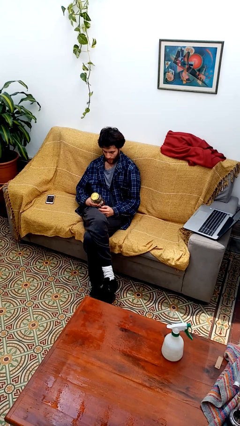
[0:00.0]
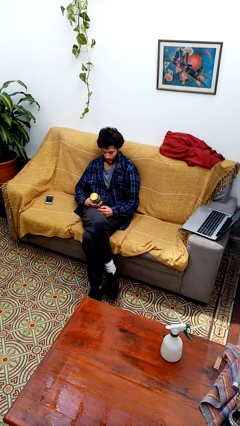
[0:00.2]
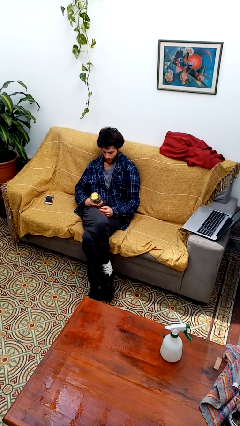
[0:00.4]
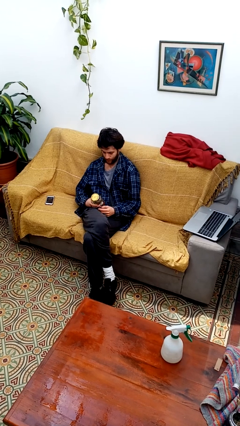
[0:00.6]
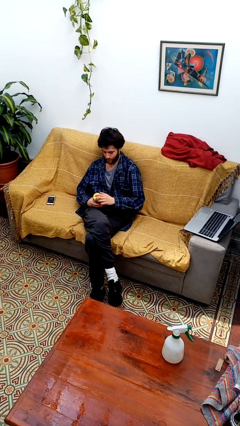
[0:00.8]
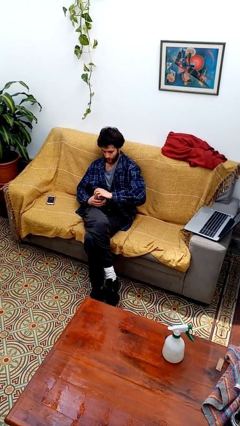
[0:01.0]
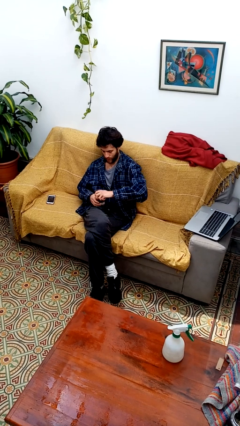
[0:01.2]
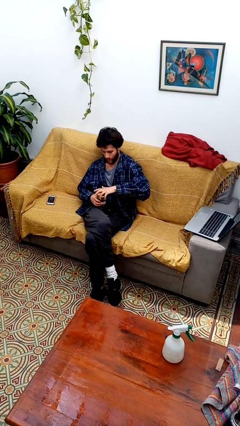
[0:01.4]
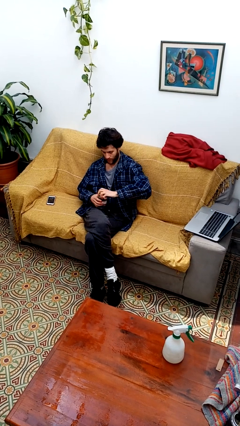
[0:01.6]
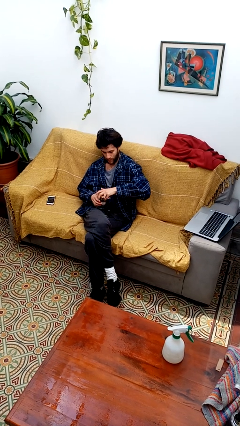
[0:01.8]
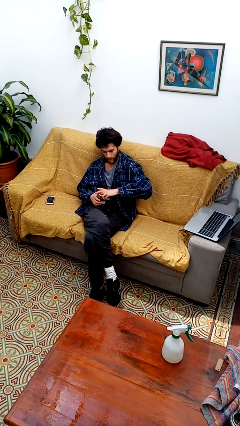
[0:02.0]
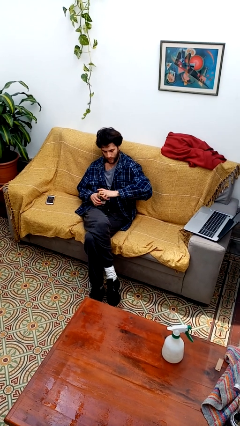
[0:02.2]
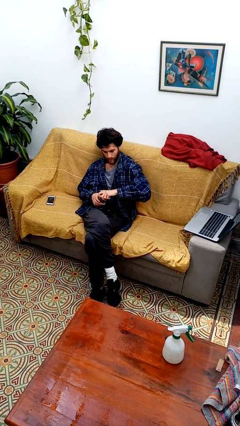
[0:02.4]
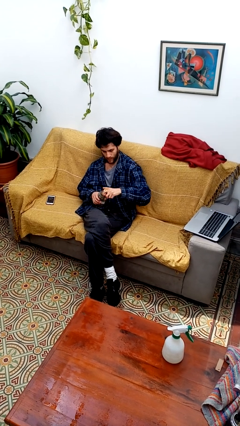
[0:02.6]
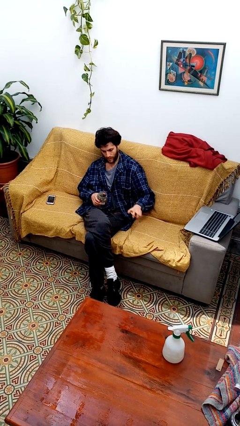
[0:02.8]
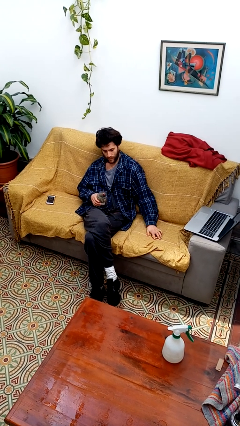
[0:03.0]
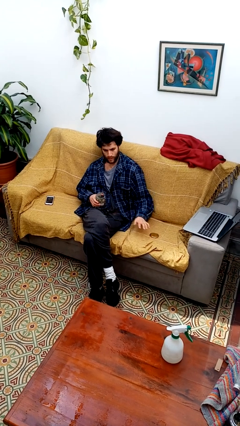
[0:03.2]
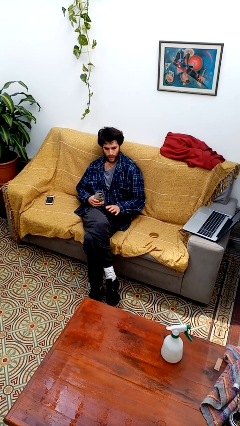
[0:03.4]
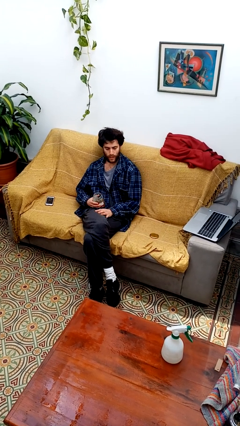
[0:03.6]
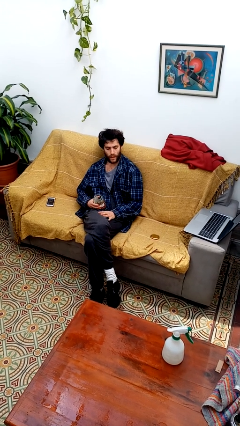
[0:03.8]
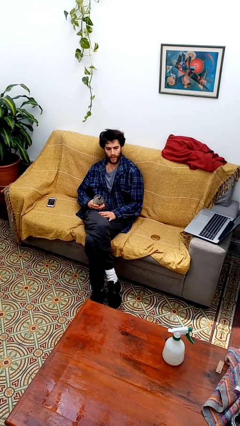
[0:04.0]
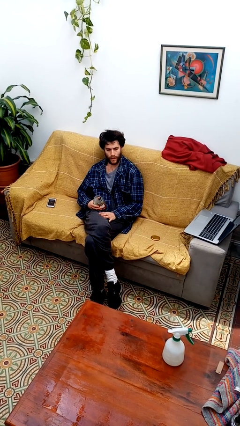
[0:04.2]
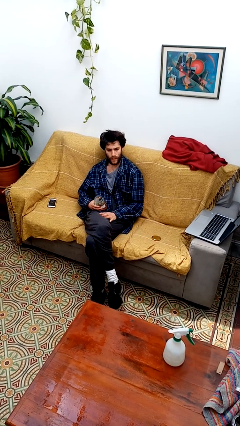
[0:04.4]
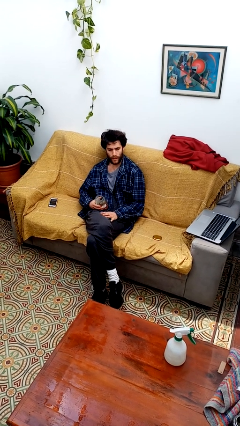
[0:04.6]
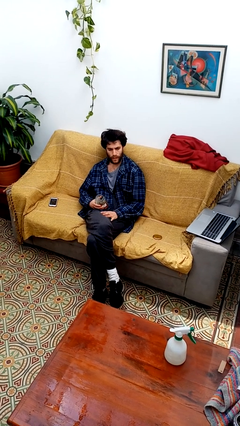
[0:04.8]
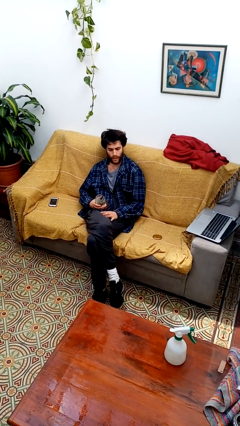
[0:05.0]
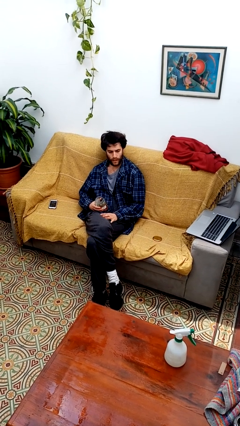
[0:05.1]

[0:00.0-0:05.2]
person opens jar

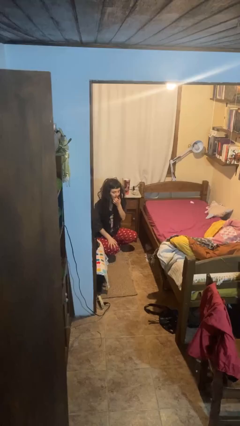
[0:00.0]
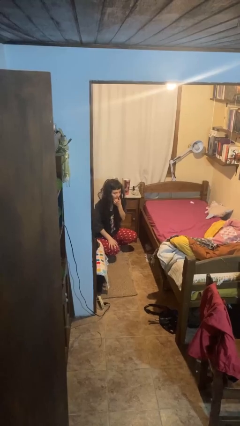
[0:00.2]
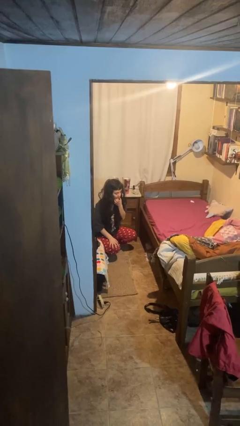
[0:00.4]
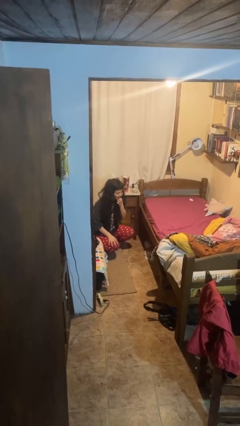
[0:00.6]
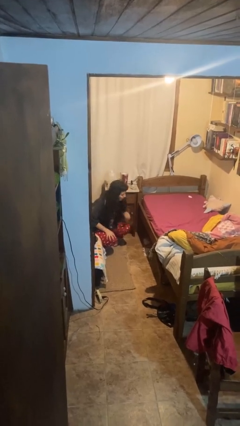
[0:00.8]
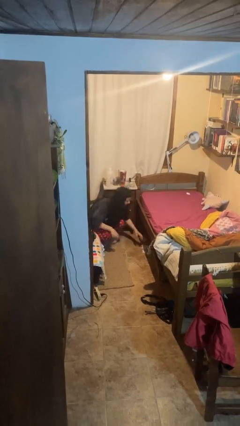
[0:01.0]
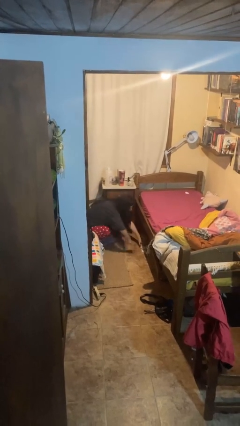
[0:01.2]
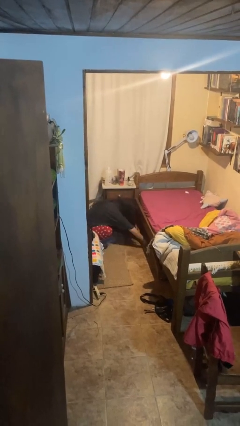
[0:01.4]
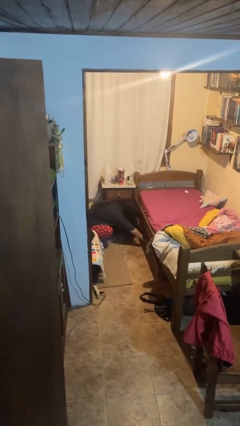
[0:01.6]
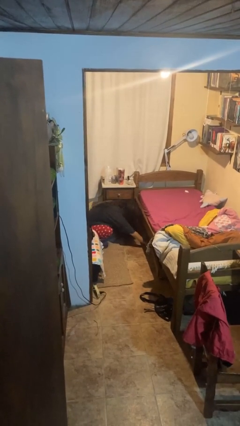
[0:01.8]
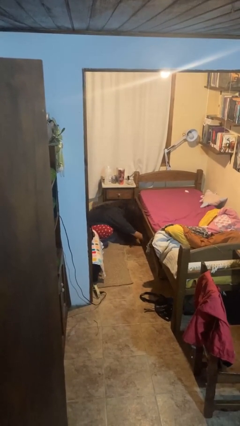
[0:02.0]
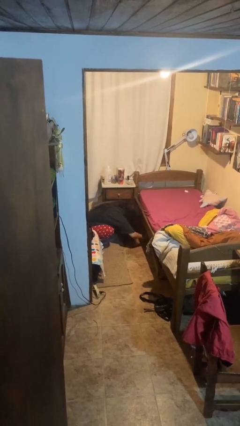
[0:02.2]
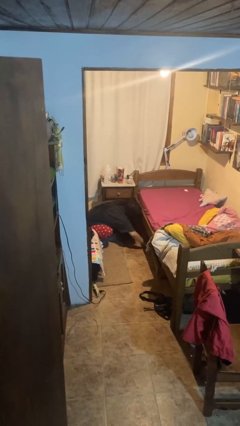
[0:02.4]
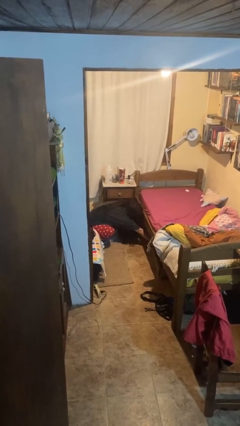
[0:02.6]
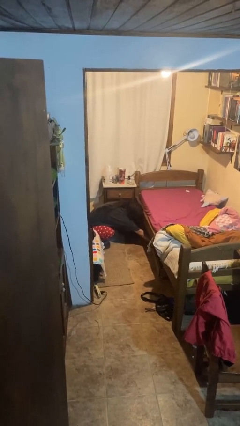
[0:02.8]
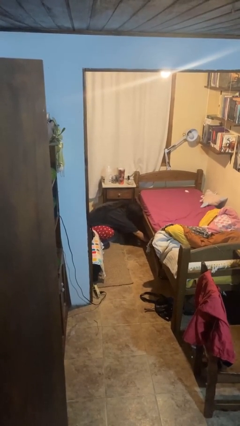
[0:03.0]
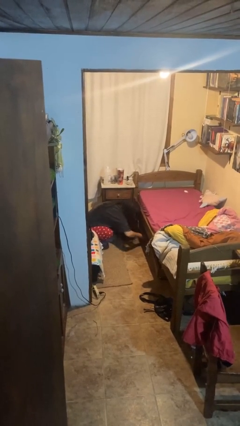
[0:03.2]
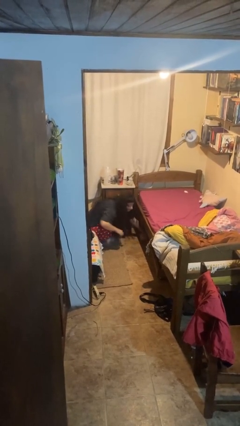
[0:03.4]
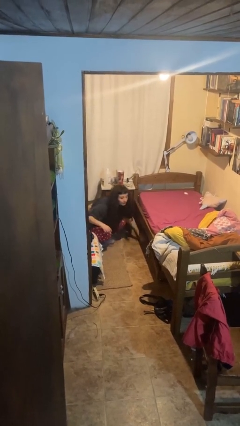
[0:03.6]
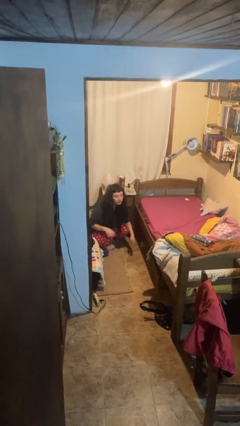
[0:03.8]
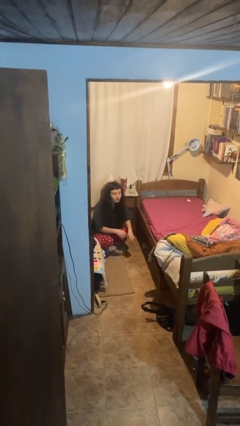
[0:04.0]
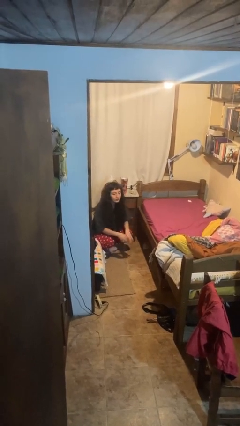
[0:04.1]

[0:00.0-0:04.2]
person searches under bed

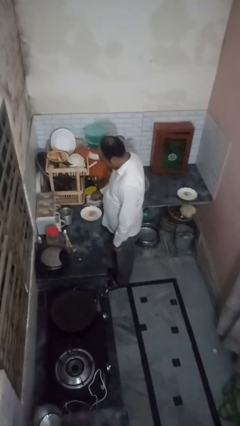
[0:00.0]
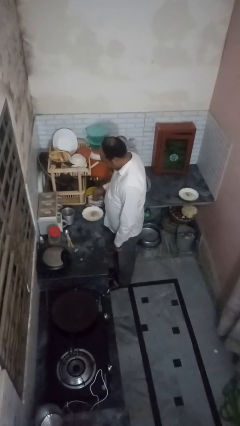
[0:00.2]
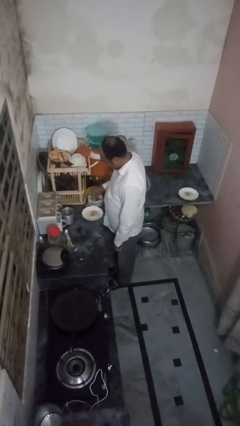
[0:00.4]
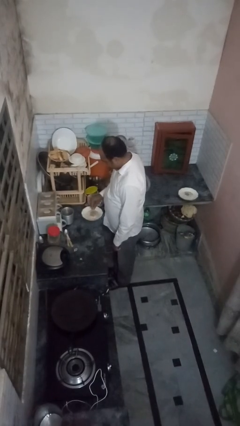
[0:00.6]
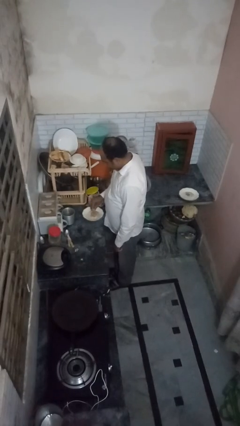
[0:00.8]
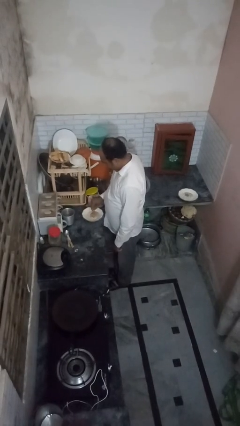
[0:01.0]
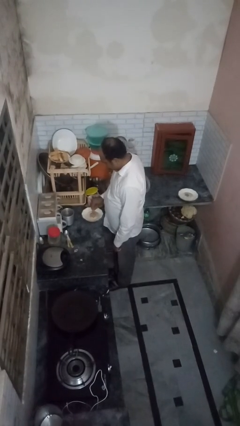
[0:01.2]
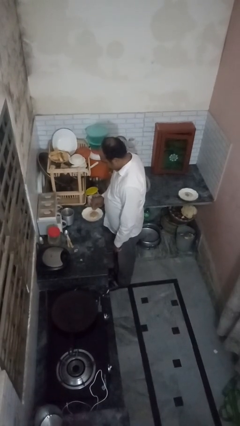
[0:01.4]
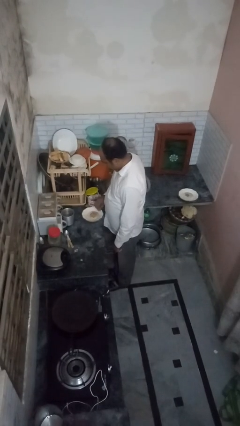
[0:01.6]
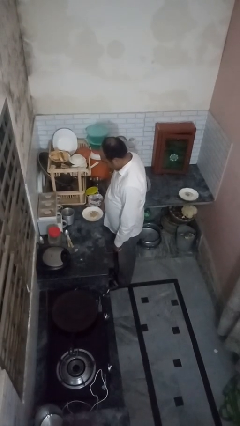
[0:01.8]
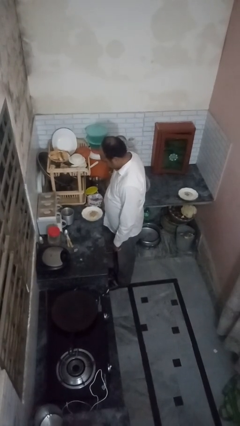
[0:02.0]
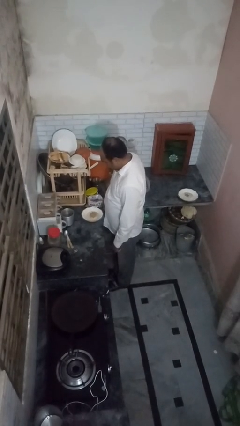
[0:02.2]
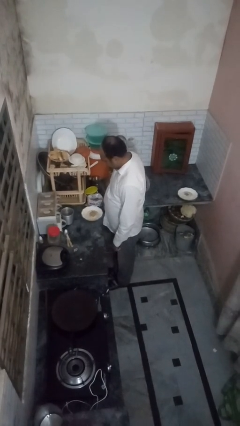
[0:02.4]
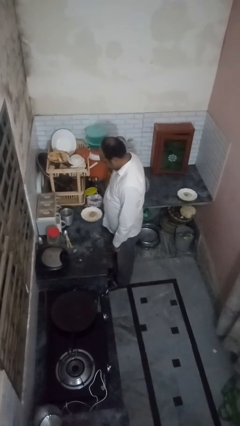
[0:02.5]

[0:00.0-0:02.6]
person pours into bowl

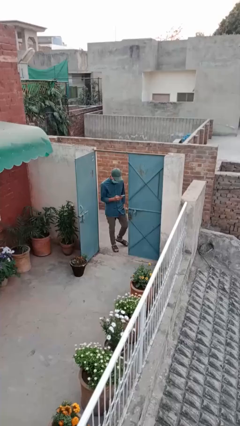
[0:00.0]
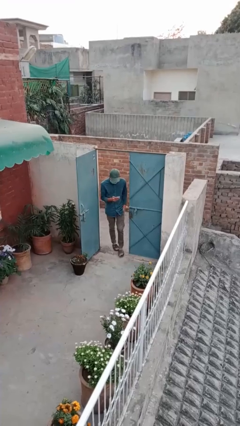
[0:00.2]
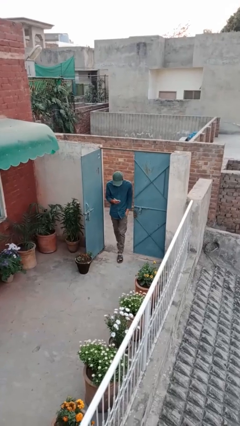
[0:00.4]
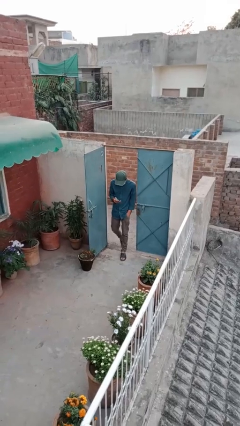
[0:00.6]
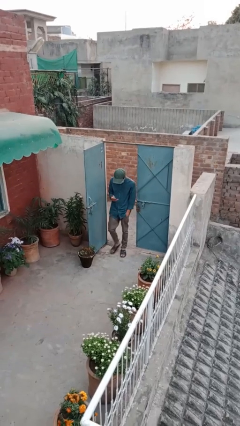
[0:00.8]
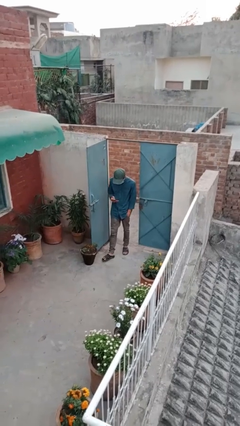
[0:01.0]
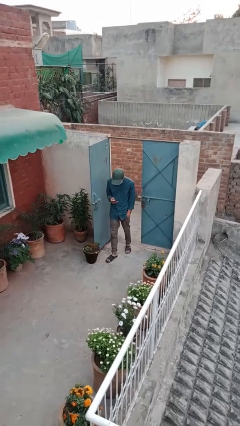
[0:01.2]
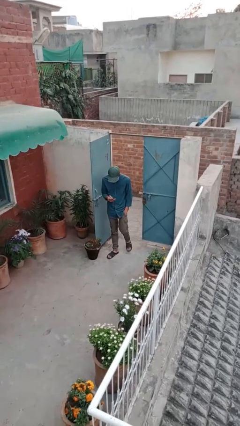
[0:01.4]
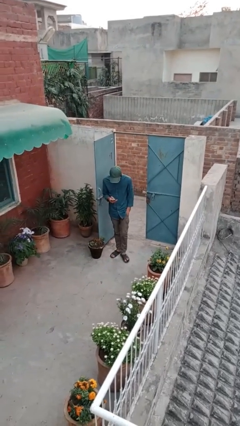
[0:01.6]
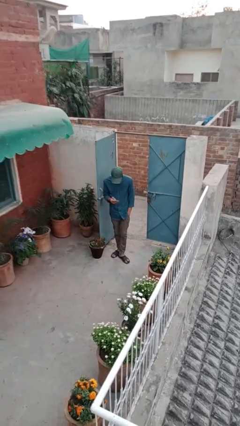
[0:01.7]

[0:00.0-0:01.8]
person enters scene through structure

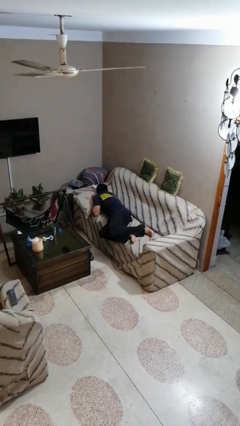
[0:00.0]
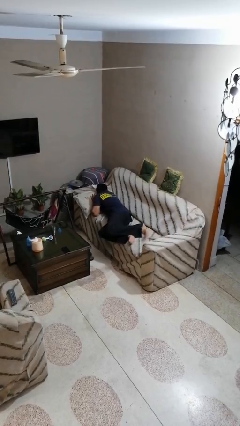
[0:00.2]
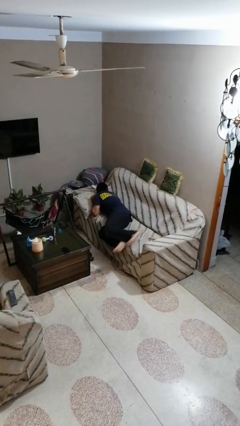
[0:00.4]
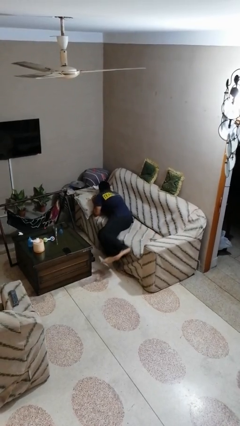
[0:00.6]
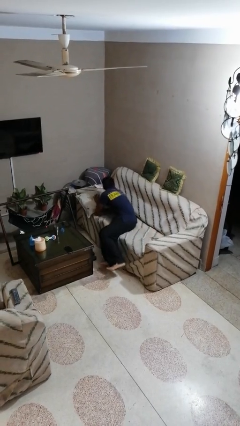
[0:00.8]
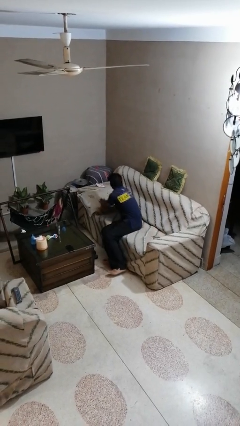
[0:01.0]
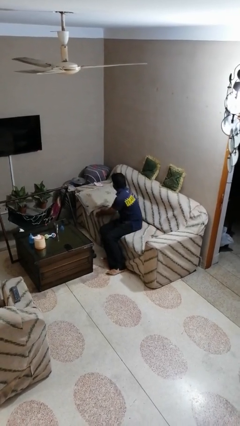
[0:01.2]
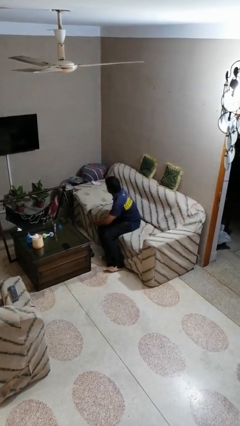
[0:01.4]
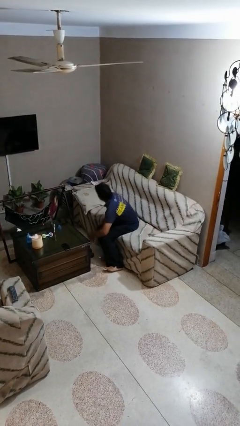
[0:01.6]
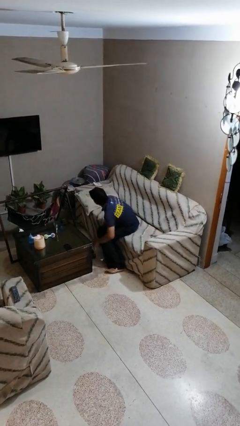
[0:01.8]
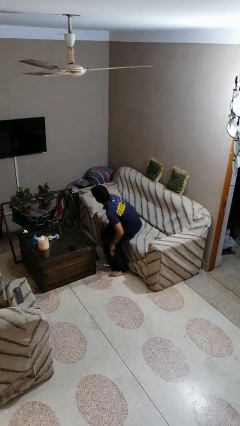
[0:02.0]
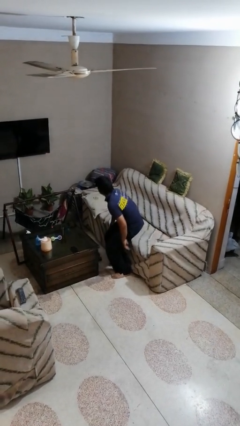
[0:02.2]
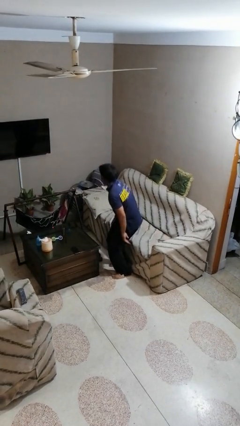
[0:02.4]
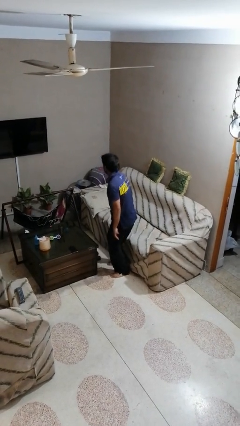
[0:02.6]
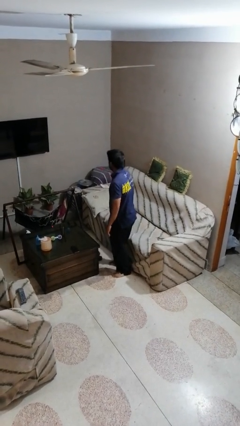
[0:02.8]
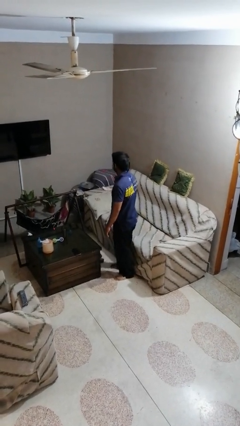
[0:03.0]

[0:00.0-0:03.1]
person stands up

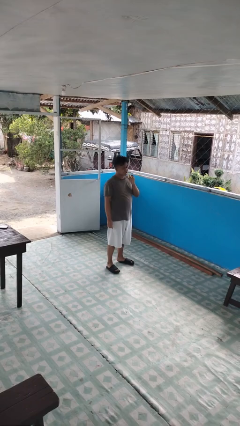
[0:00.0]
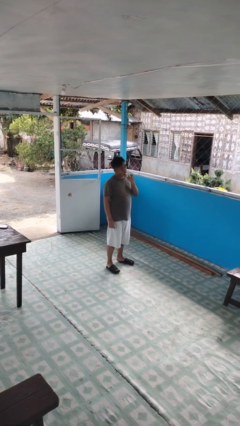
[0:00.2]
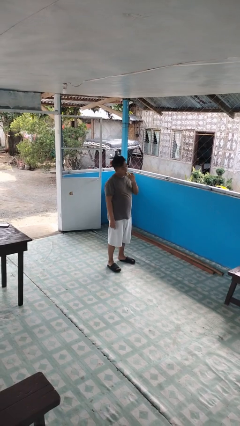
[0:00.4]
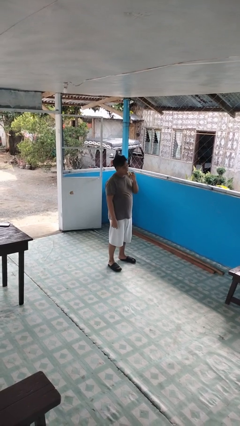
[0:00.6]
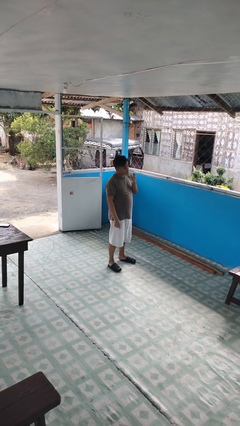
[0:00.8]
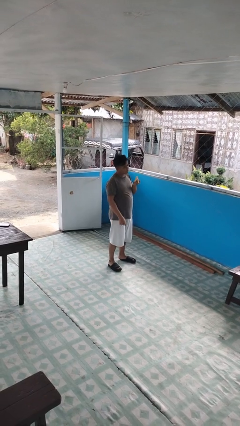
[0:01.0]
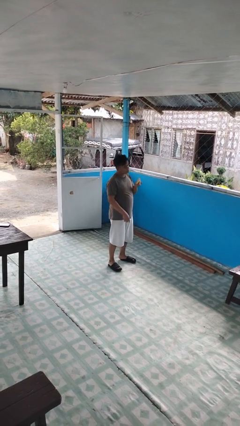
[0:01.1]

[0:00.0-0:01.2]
person eats banana
